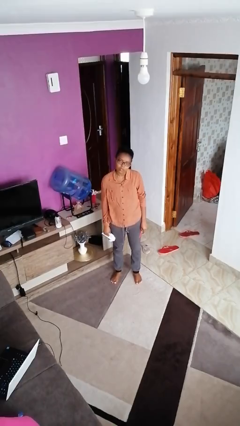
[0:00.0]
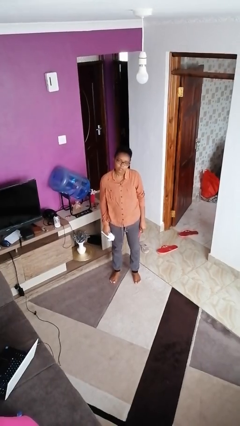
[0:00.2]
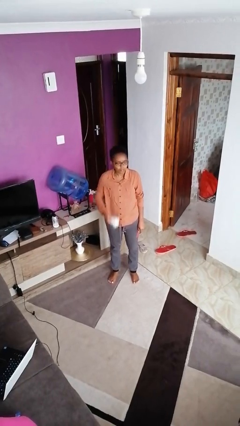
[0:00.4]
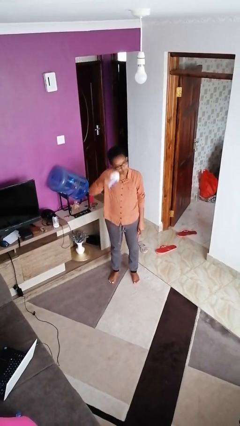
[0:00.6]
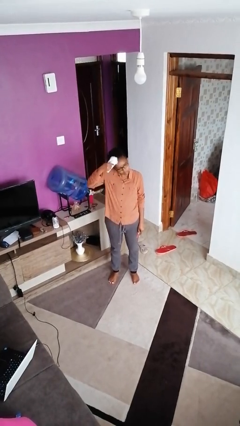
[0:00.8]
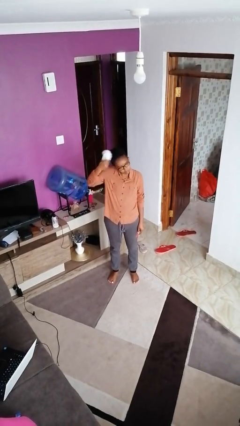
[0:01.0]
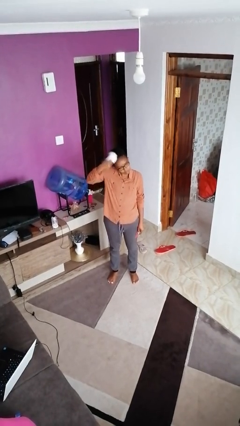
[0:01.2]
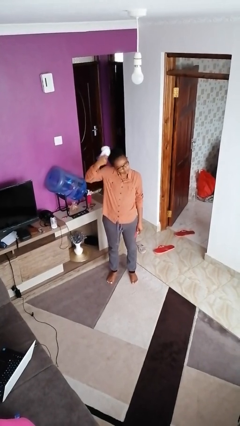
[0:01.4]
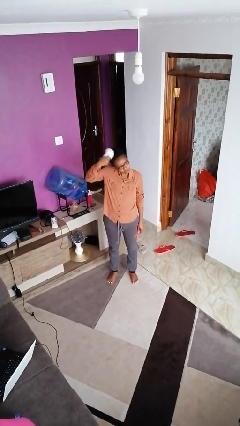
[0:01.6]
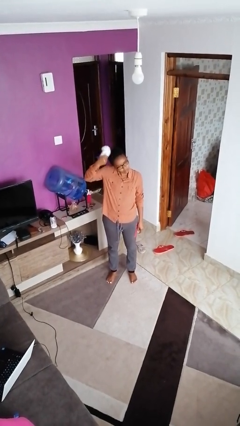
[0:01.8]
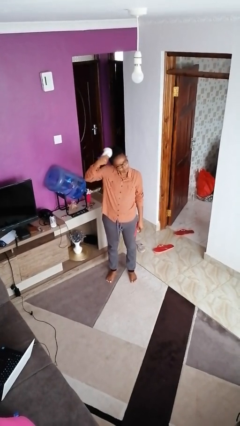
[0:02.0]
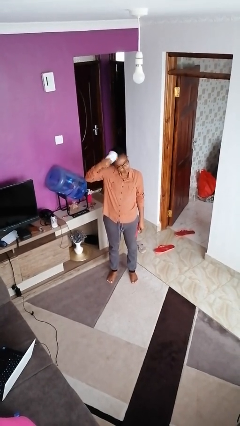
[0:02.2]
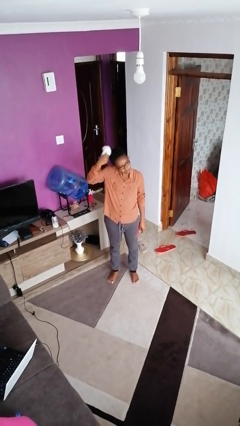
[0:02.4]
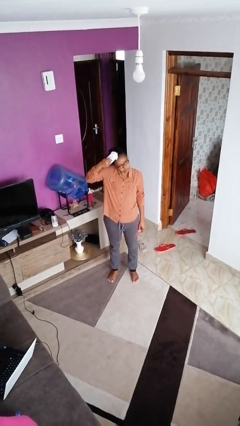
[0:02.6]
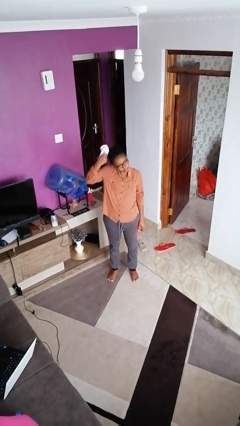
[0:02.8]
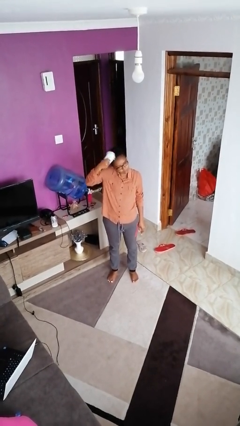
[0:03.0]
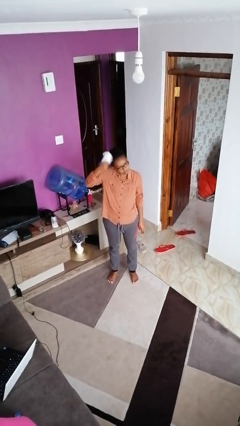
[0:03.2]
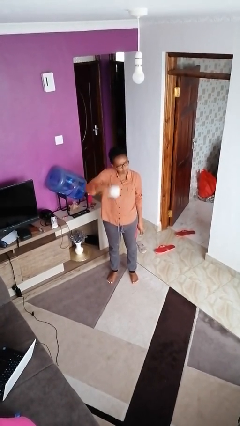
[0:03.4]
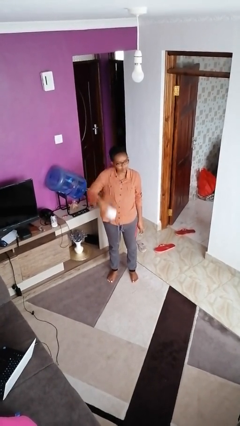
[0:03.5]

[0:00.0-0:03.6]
person brushes hair

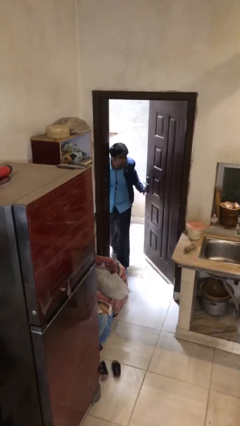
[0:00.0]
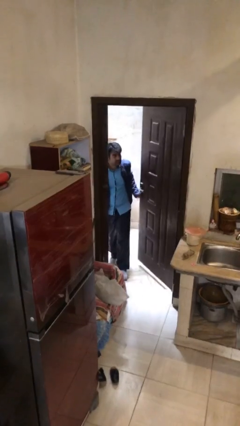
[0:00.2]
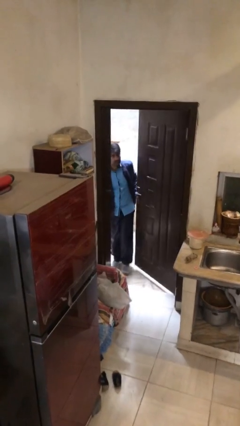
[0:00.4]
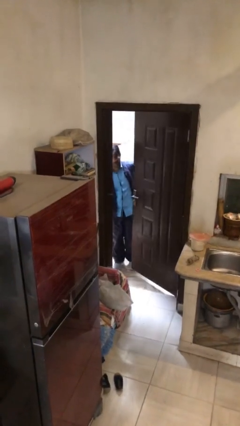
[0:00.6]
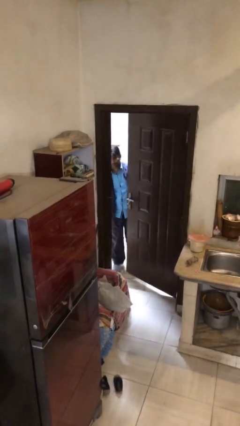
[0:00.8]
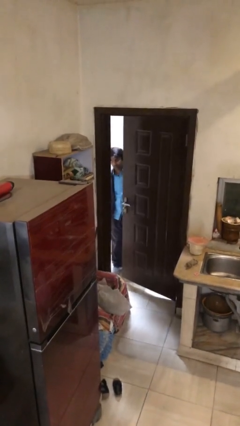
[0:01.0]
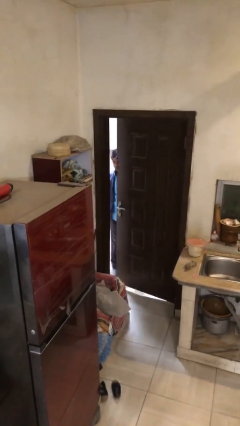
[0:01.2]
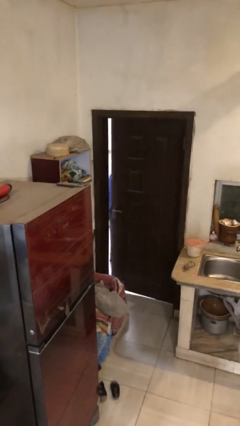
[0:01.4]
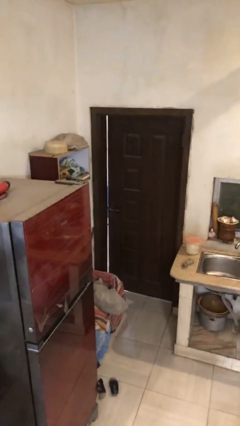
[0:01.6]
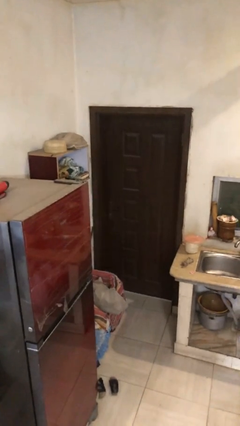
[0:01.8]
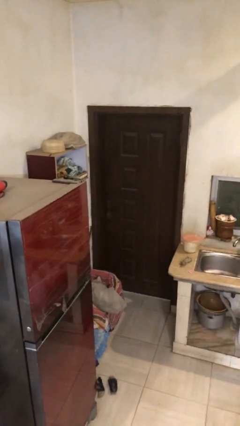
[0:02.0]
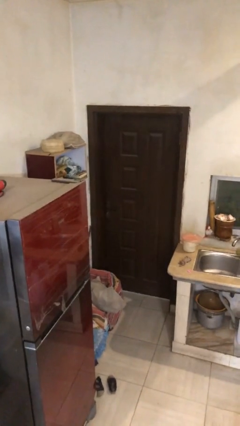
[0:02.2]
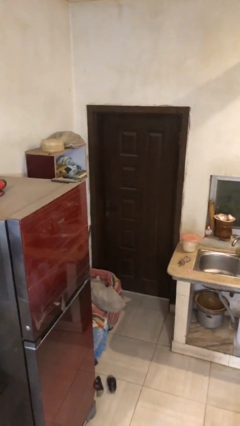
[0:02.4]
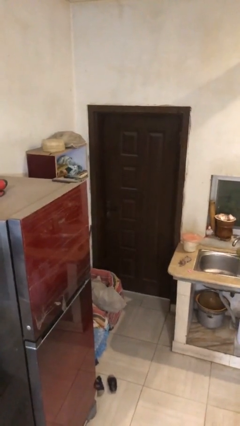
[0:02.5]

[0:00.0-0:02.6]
person closes facility door

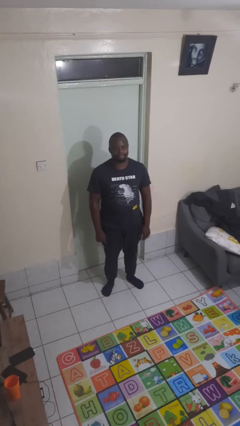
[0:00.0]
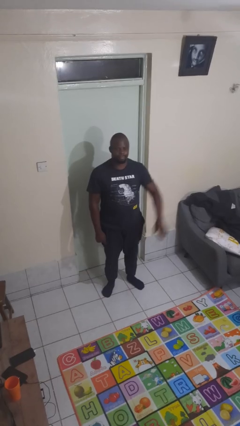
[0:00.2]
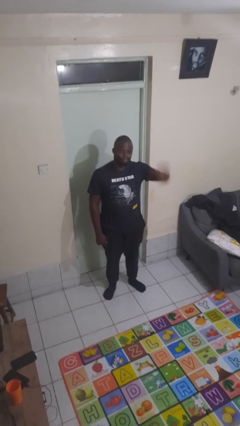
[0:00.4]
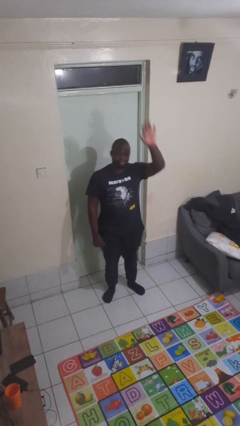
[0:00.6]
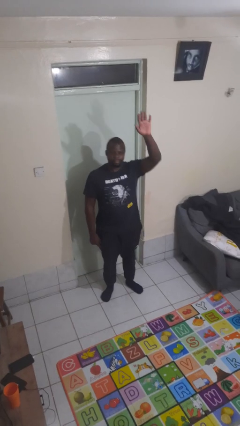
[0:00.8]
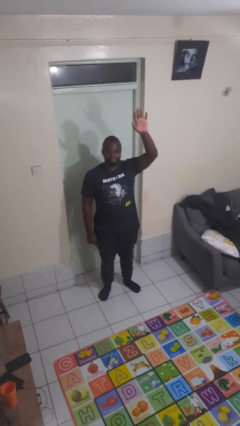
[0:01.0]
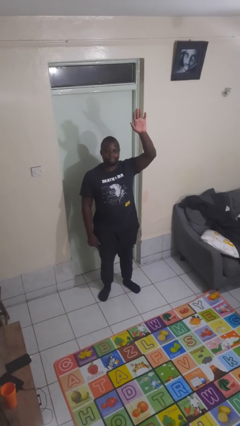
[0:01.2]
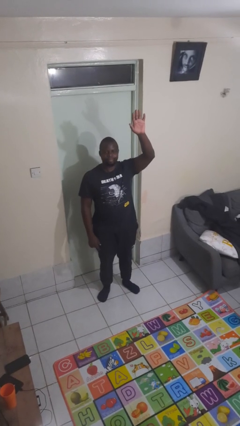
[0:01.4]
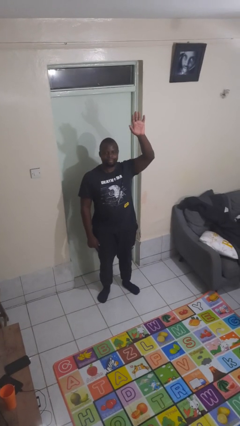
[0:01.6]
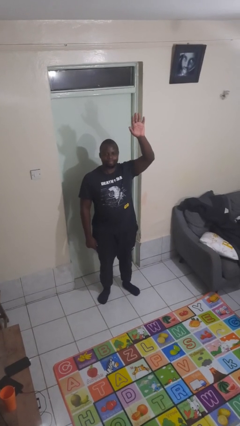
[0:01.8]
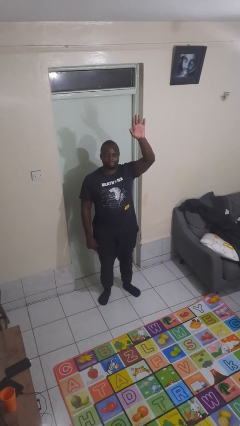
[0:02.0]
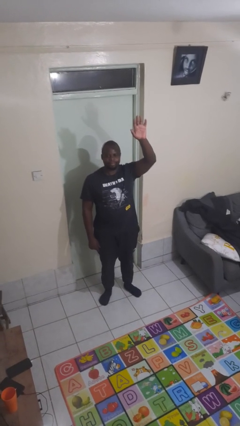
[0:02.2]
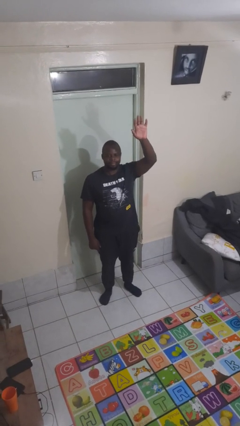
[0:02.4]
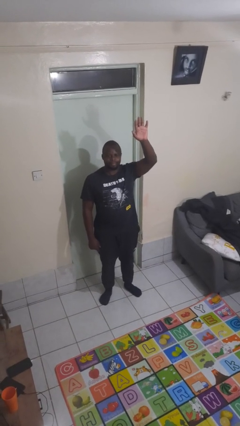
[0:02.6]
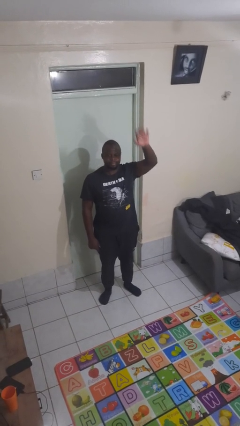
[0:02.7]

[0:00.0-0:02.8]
person gestures raise hand

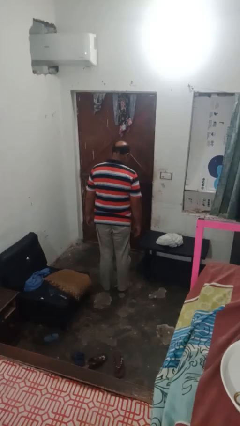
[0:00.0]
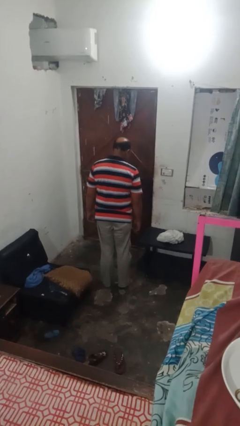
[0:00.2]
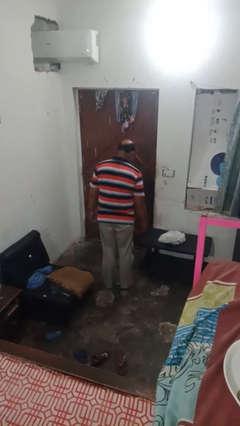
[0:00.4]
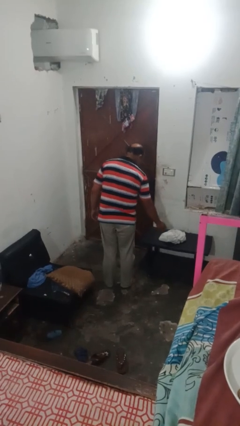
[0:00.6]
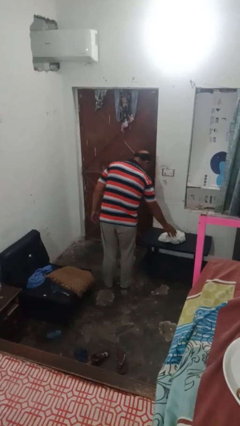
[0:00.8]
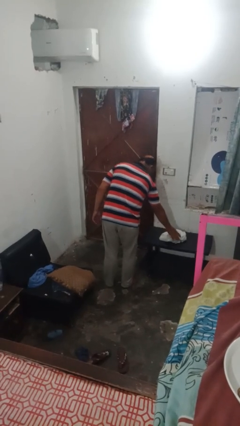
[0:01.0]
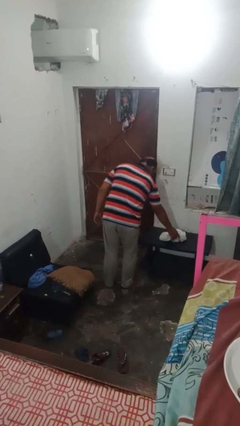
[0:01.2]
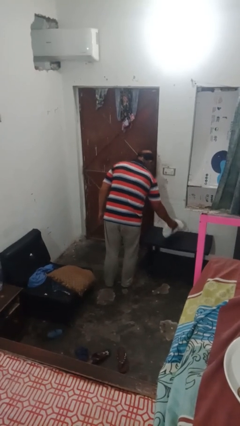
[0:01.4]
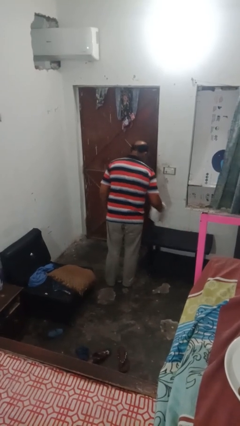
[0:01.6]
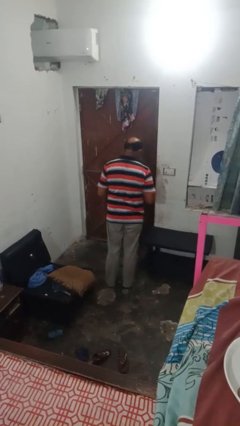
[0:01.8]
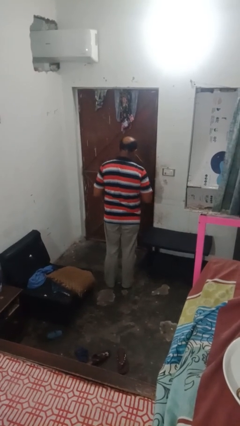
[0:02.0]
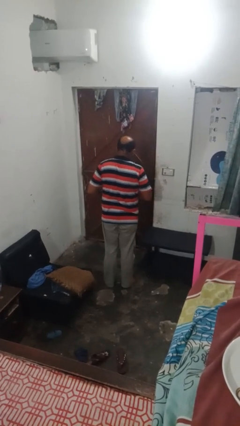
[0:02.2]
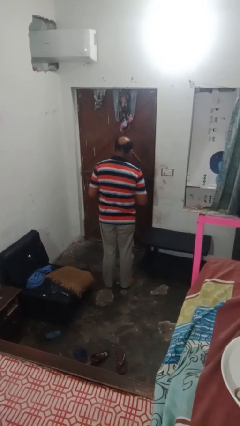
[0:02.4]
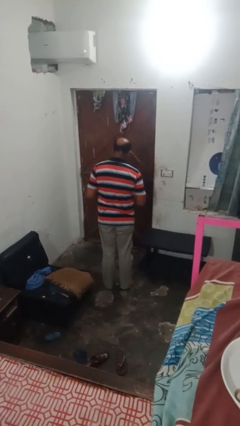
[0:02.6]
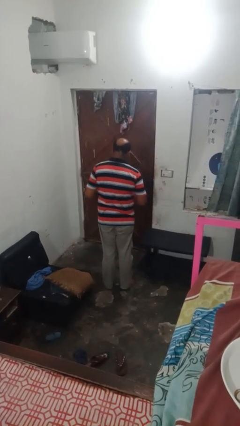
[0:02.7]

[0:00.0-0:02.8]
person picks up object from table

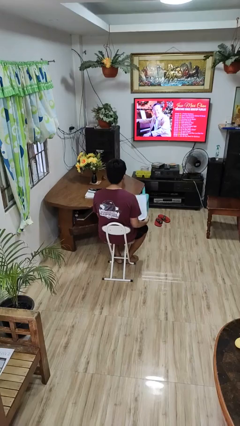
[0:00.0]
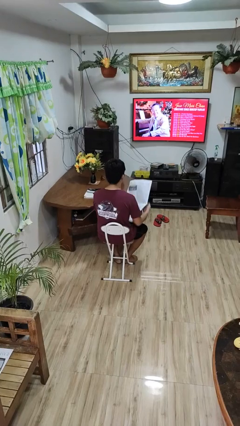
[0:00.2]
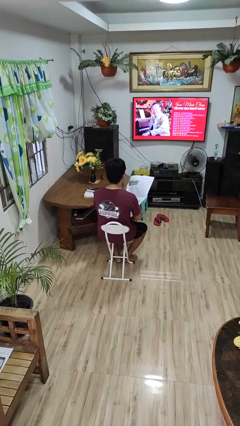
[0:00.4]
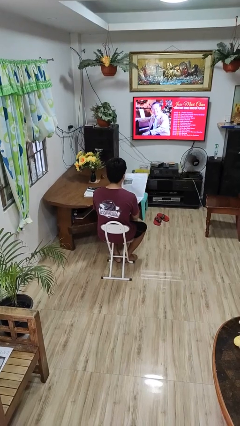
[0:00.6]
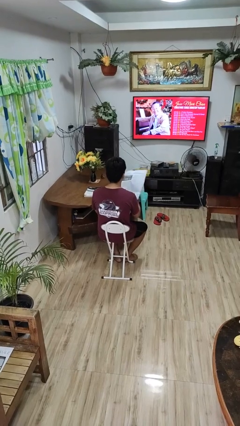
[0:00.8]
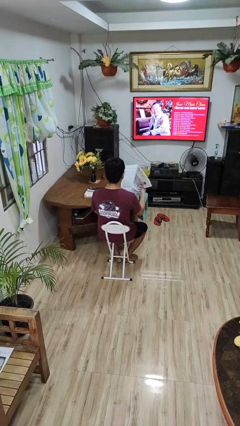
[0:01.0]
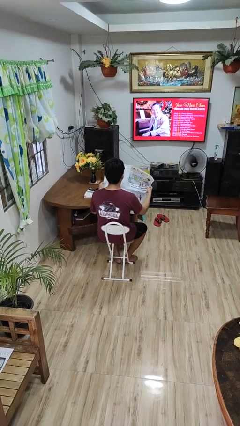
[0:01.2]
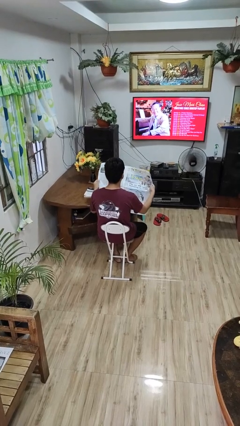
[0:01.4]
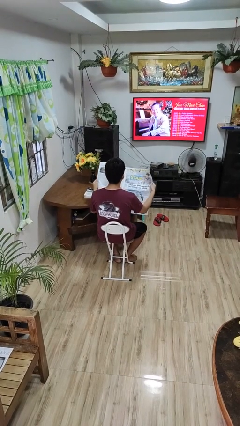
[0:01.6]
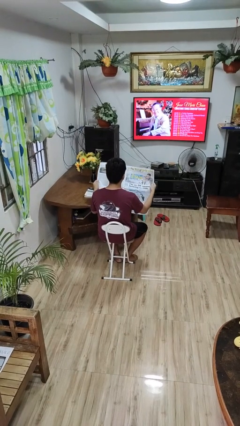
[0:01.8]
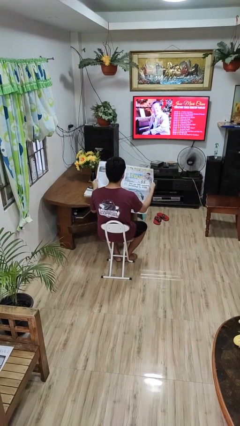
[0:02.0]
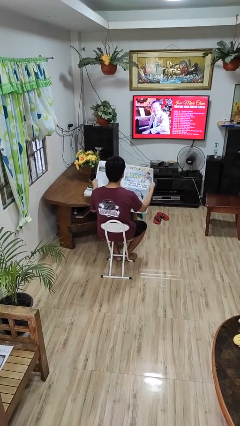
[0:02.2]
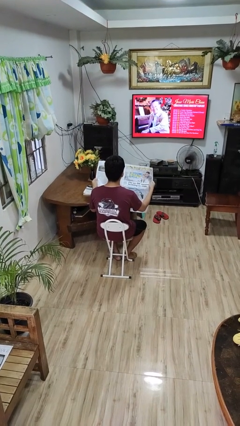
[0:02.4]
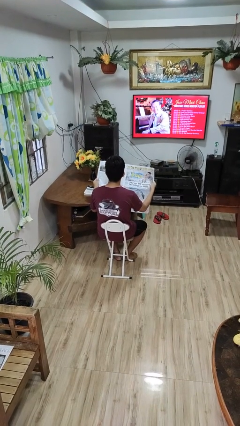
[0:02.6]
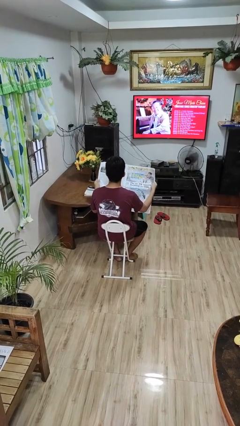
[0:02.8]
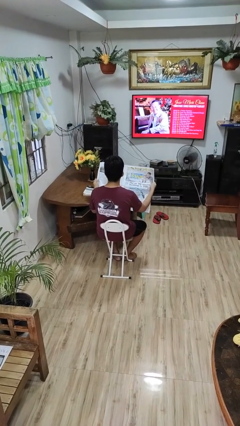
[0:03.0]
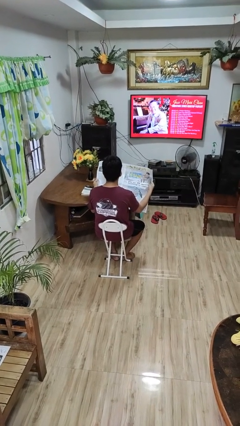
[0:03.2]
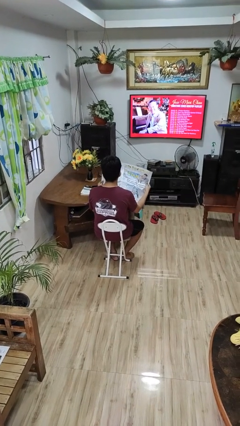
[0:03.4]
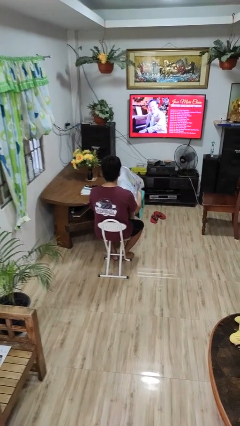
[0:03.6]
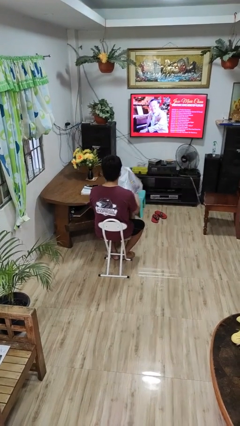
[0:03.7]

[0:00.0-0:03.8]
person reads newspaper

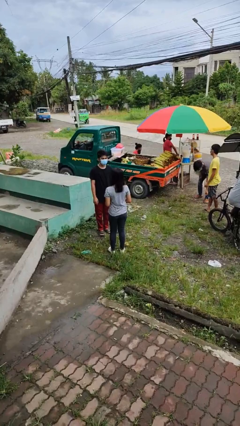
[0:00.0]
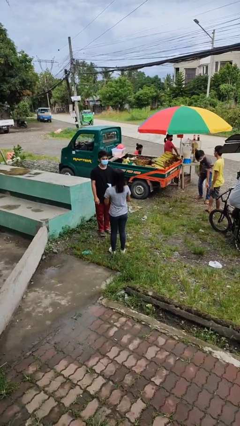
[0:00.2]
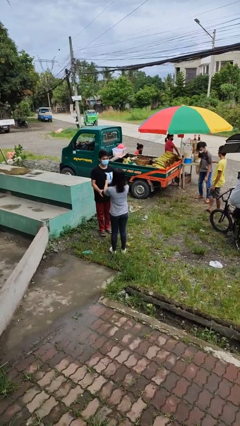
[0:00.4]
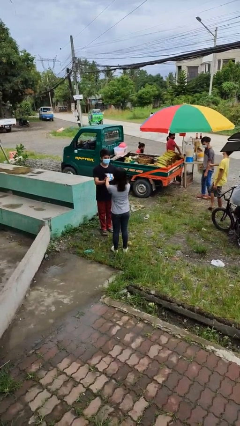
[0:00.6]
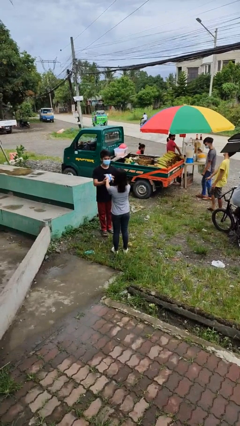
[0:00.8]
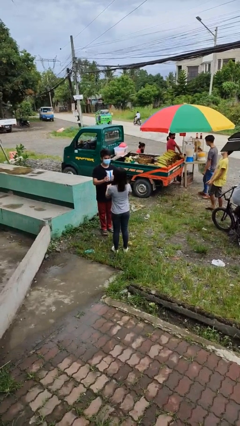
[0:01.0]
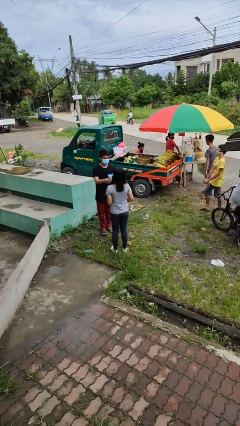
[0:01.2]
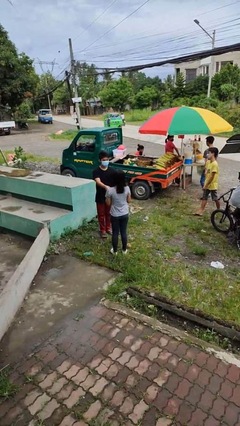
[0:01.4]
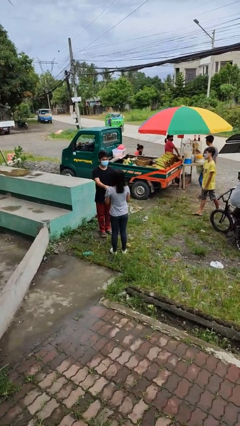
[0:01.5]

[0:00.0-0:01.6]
person transfers object to person
